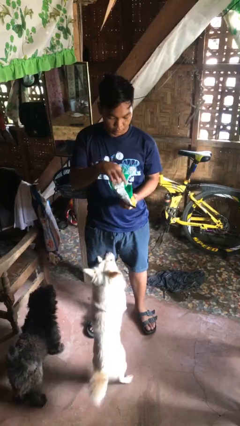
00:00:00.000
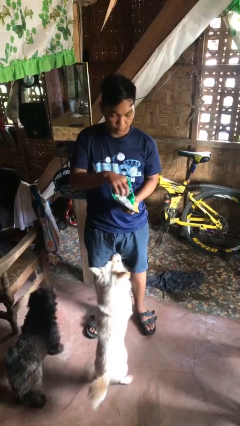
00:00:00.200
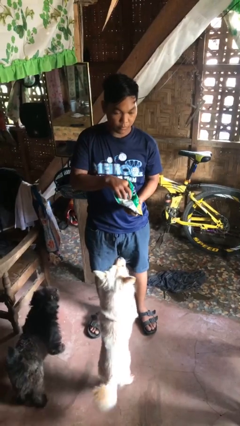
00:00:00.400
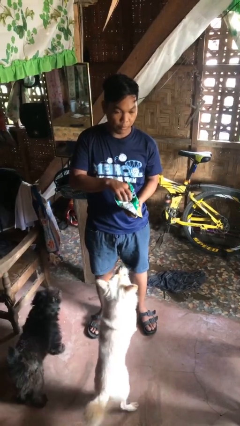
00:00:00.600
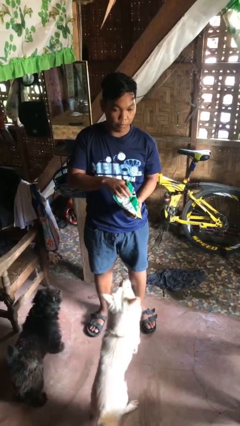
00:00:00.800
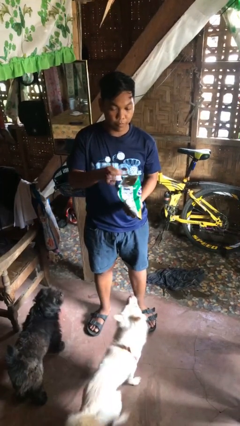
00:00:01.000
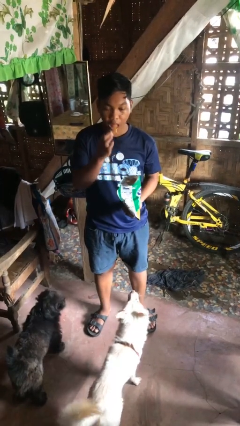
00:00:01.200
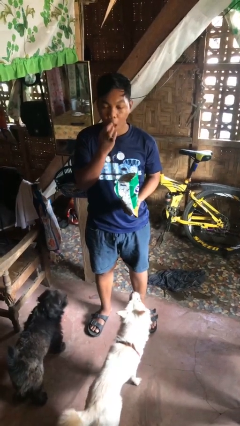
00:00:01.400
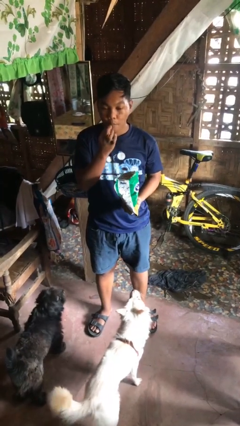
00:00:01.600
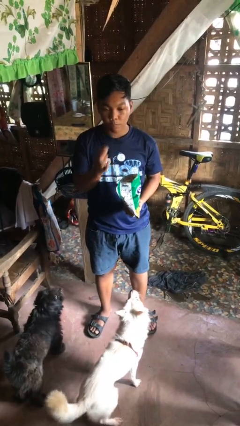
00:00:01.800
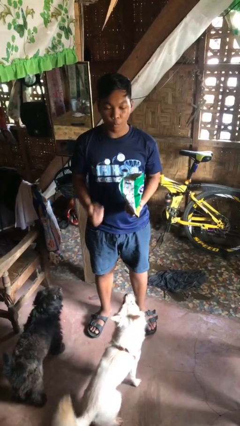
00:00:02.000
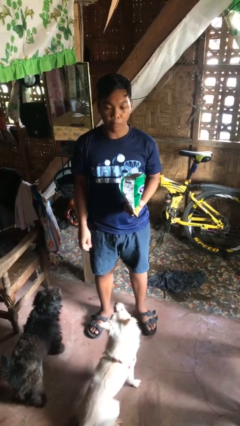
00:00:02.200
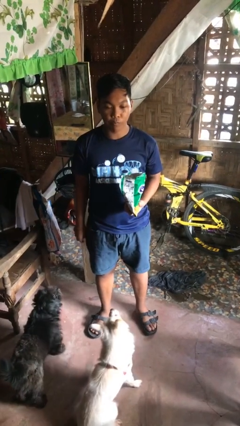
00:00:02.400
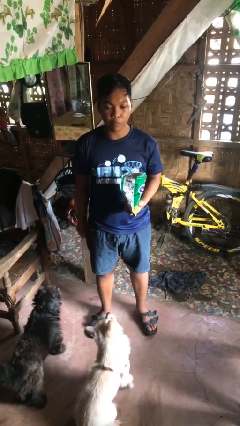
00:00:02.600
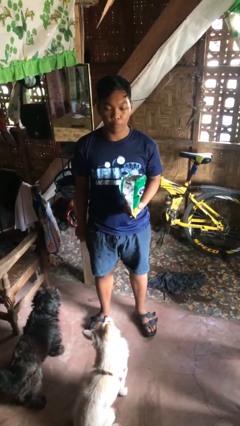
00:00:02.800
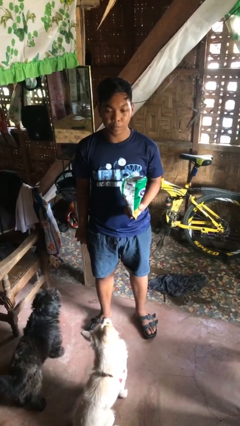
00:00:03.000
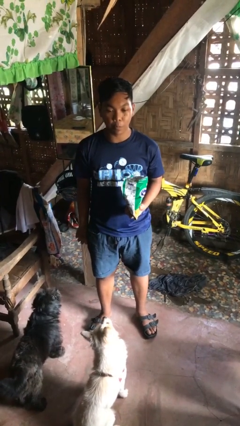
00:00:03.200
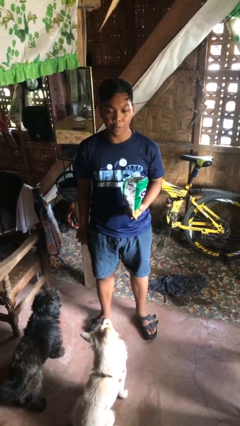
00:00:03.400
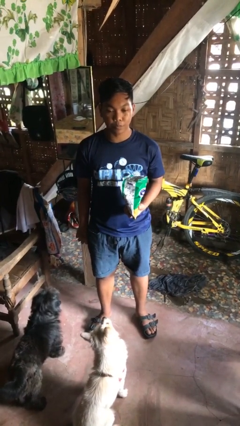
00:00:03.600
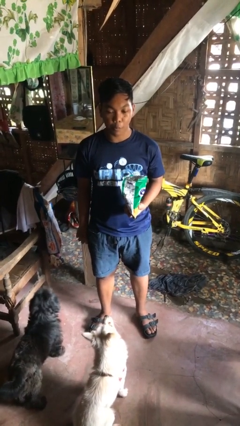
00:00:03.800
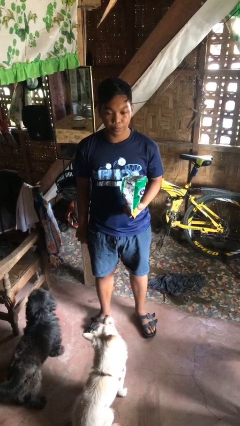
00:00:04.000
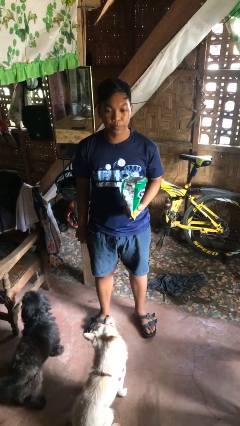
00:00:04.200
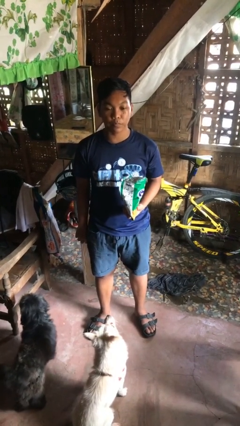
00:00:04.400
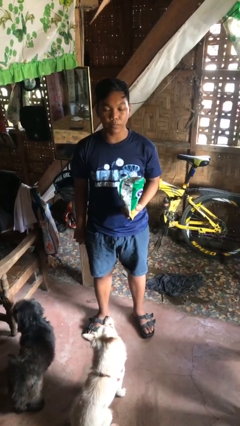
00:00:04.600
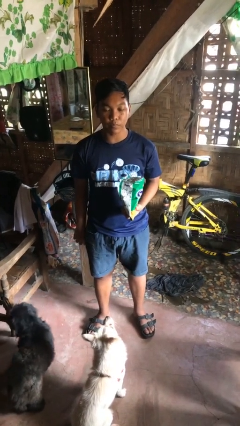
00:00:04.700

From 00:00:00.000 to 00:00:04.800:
person eats snack from bag

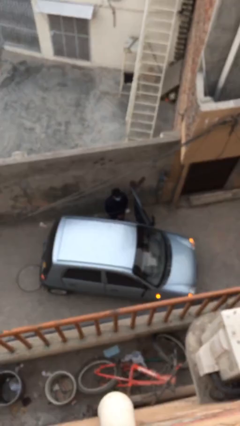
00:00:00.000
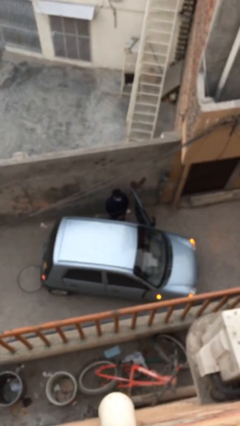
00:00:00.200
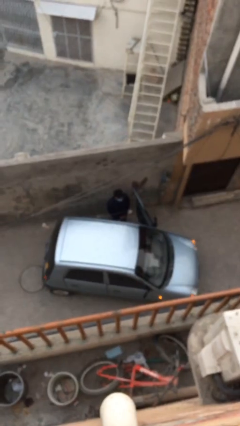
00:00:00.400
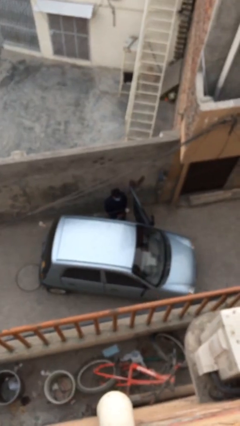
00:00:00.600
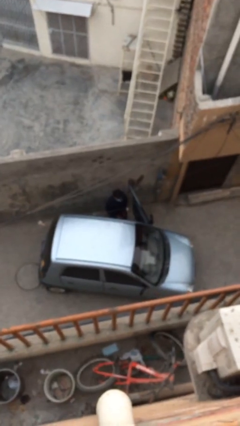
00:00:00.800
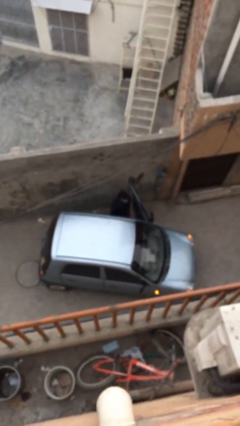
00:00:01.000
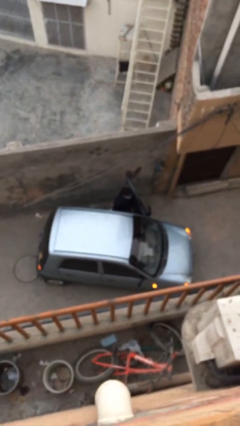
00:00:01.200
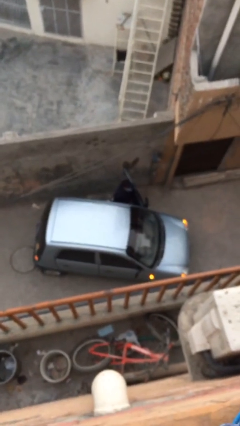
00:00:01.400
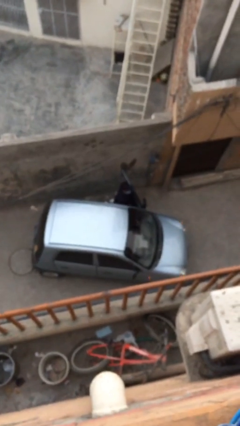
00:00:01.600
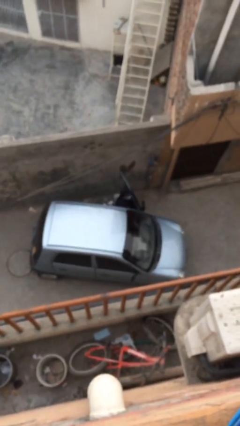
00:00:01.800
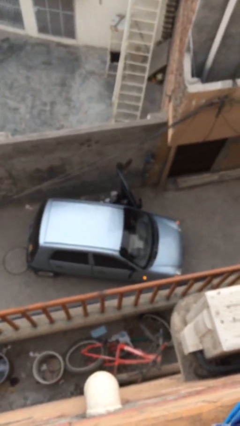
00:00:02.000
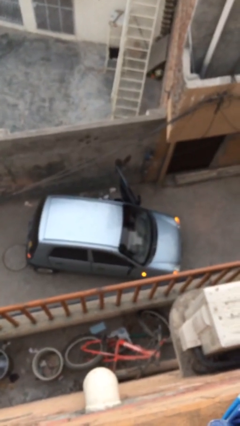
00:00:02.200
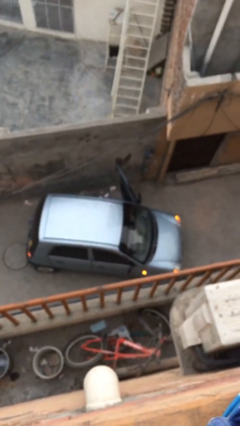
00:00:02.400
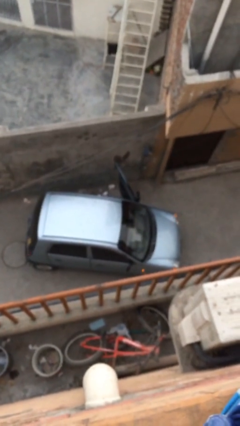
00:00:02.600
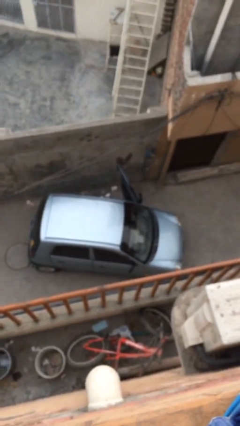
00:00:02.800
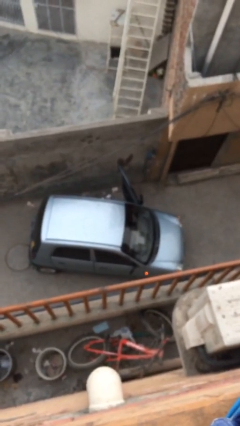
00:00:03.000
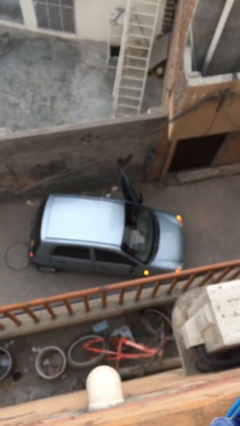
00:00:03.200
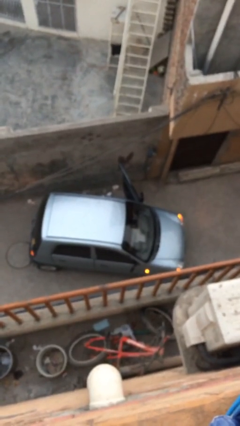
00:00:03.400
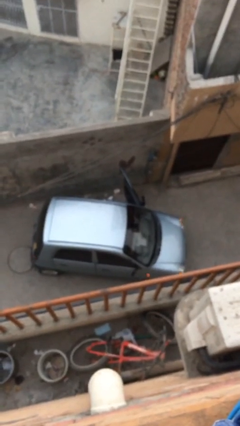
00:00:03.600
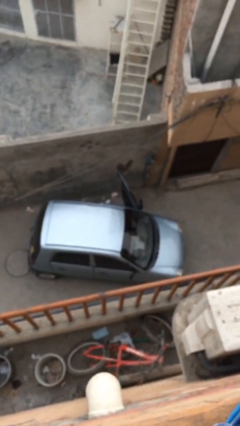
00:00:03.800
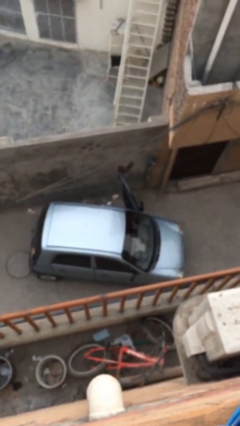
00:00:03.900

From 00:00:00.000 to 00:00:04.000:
person enters car

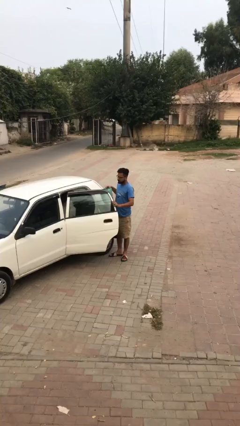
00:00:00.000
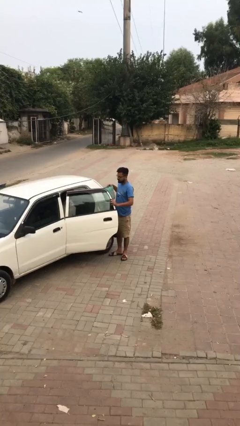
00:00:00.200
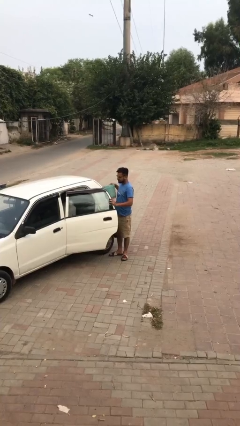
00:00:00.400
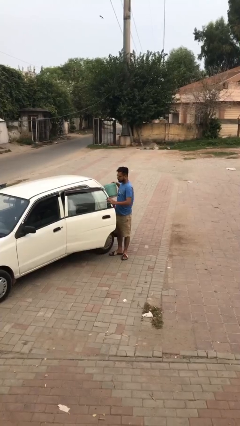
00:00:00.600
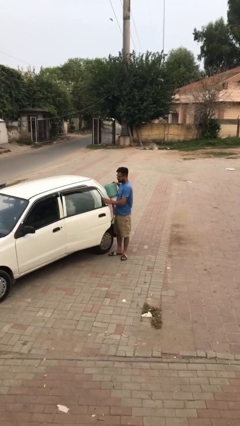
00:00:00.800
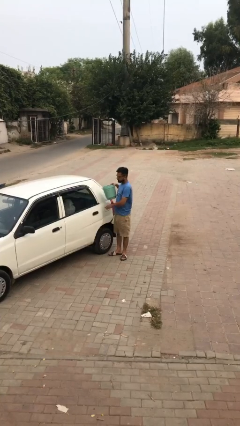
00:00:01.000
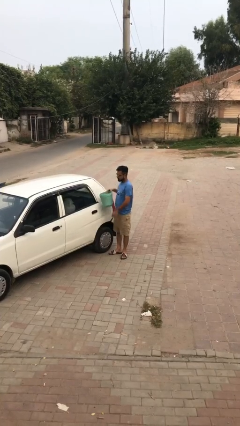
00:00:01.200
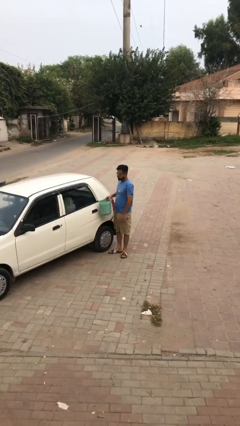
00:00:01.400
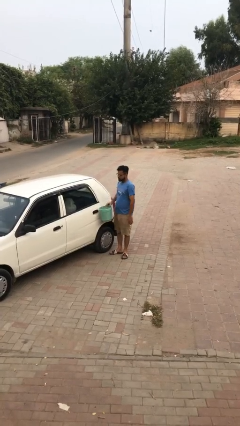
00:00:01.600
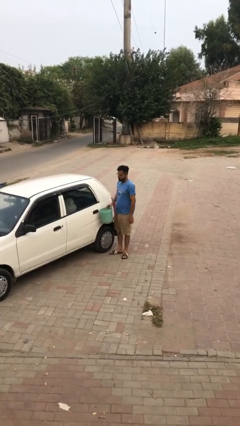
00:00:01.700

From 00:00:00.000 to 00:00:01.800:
person closes car door

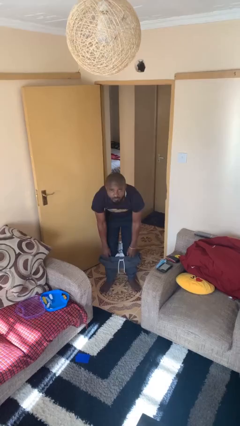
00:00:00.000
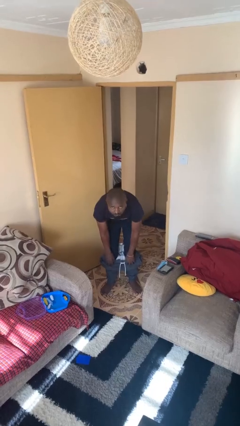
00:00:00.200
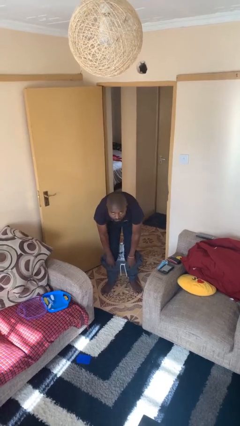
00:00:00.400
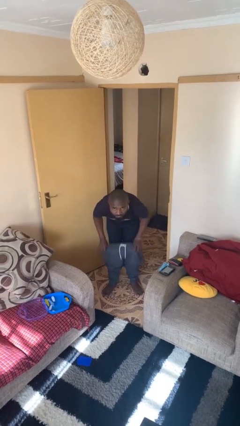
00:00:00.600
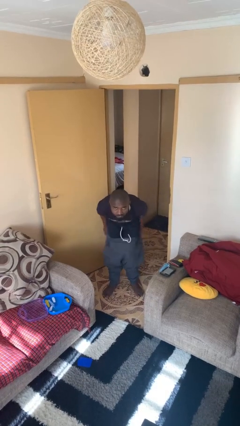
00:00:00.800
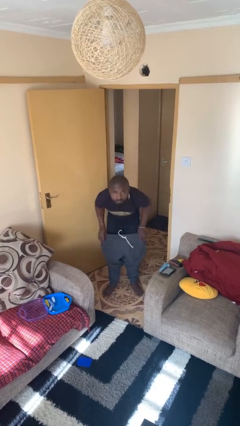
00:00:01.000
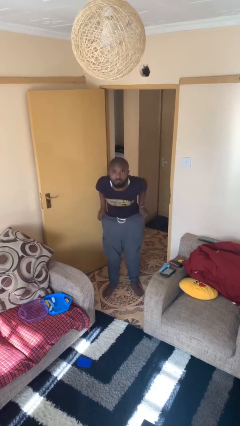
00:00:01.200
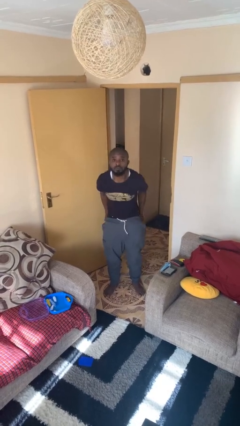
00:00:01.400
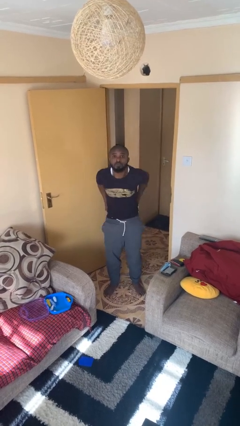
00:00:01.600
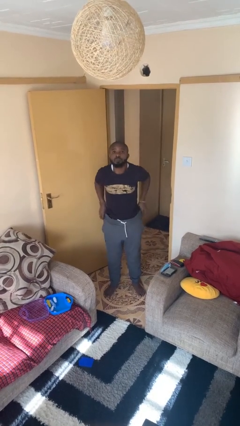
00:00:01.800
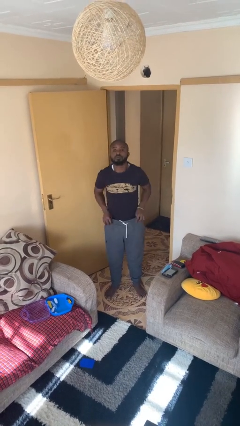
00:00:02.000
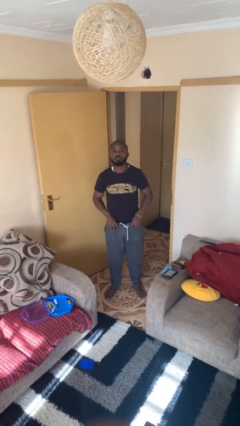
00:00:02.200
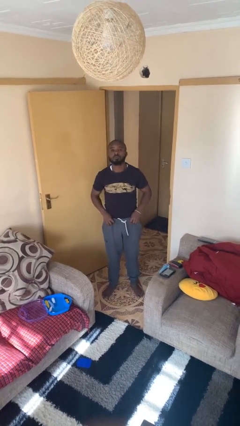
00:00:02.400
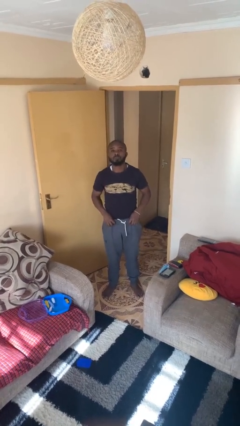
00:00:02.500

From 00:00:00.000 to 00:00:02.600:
person puts on pants

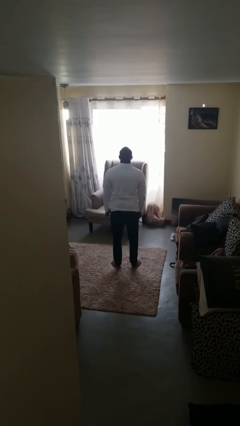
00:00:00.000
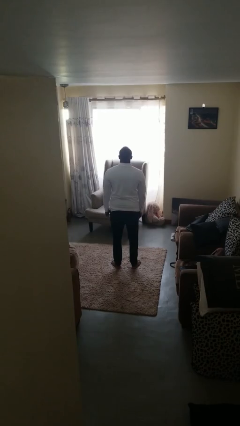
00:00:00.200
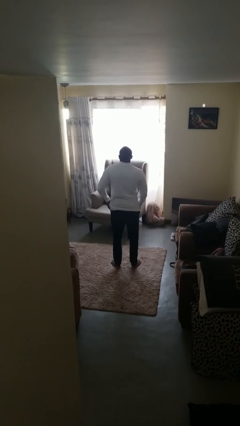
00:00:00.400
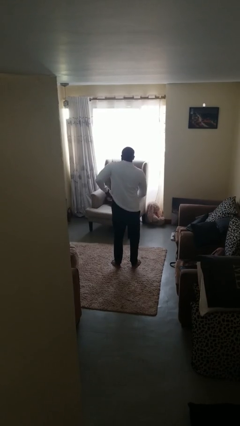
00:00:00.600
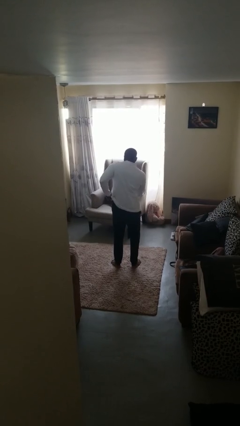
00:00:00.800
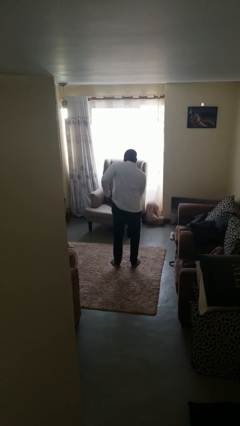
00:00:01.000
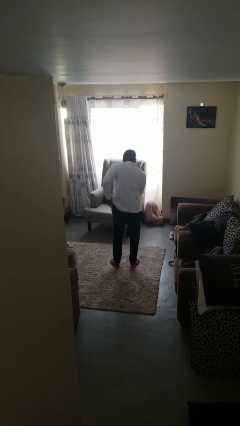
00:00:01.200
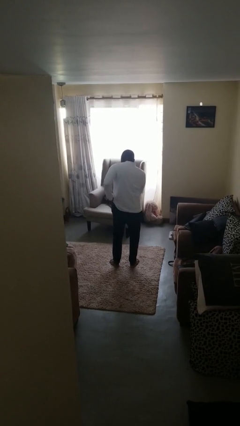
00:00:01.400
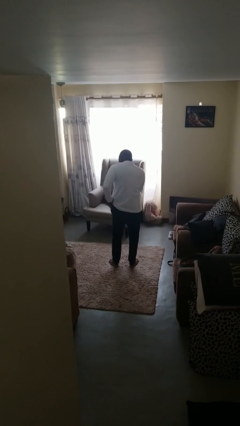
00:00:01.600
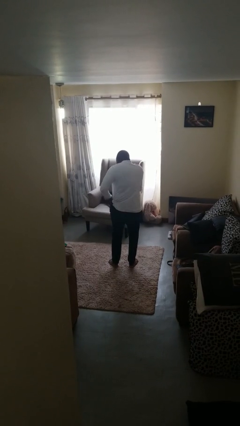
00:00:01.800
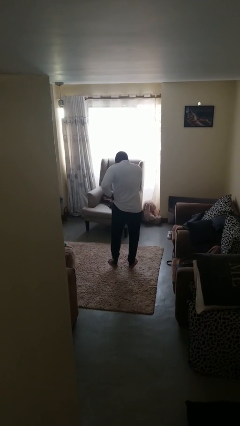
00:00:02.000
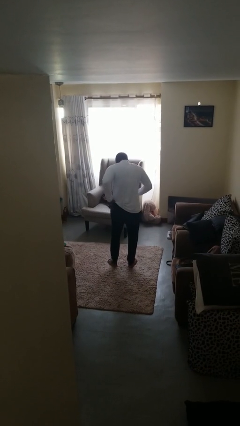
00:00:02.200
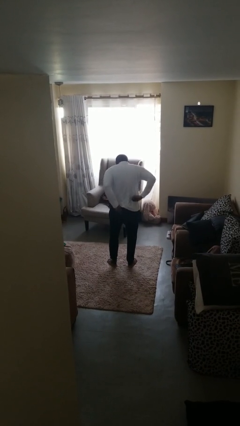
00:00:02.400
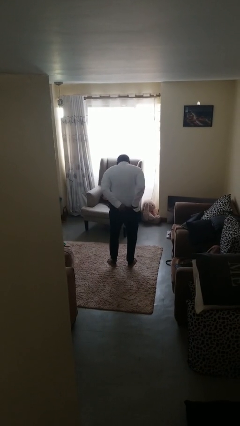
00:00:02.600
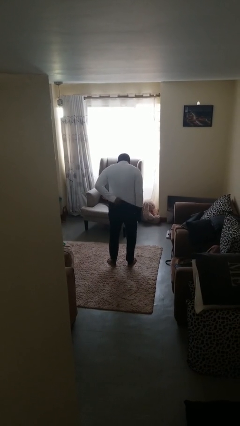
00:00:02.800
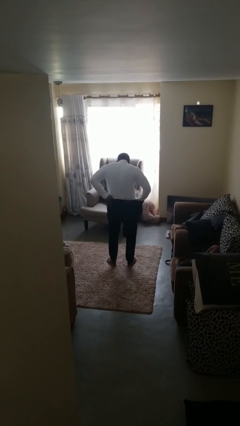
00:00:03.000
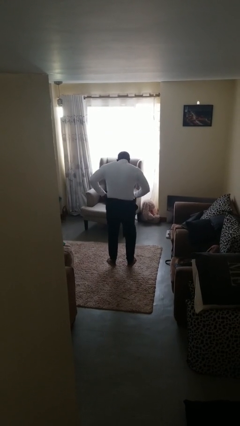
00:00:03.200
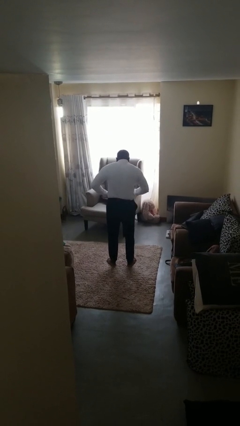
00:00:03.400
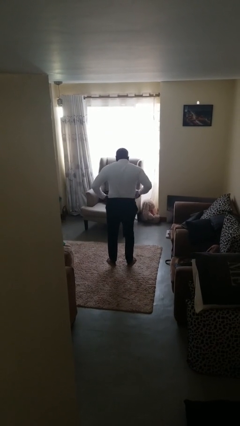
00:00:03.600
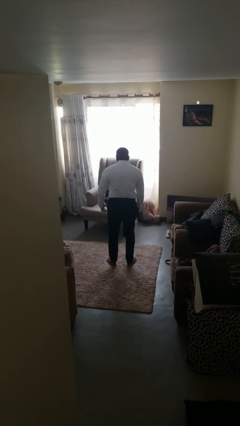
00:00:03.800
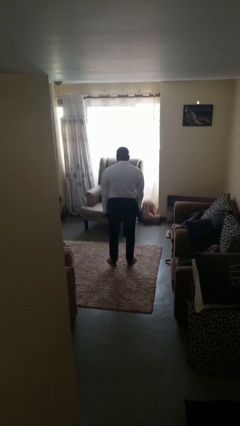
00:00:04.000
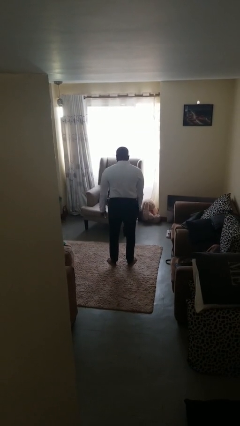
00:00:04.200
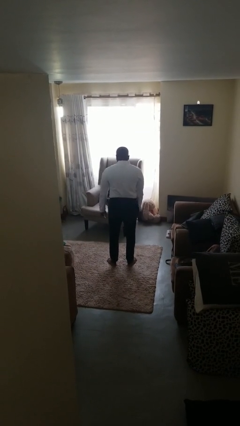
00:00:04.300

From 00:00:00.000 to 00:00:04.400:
person tucks in shirt
